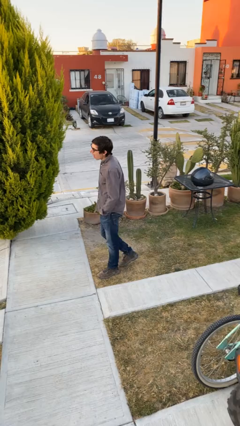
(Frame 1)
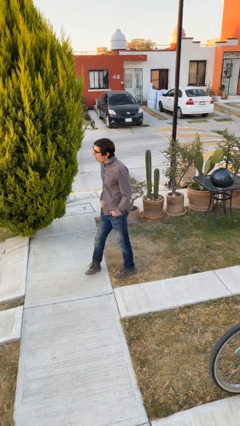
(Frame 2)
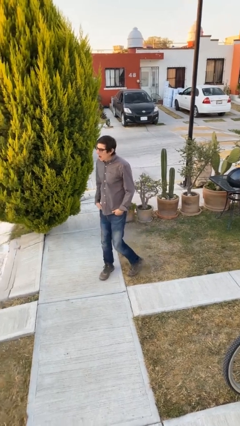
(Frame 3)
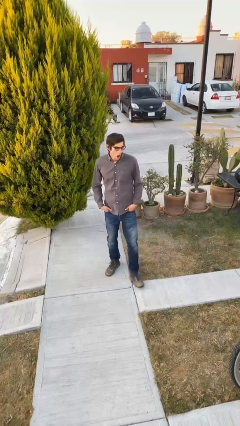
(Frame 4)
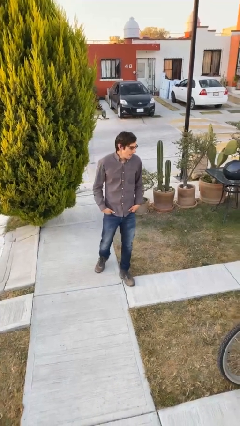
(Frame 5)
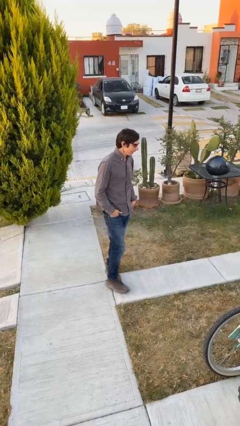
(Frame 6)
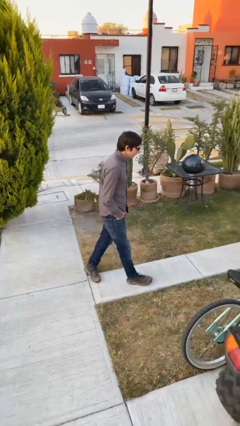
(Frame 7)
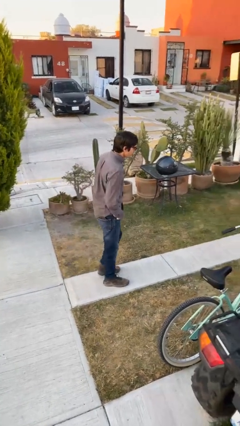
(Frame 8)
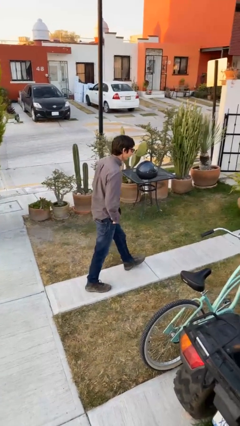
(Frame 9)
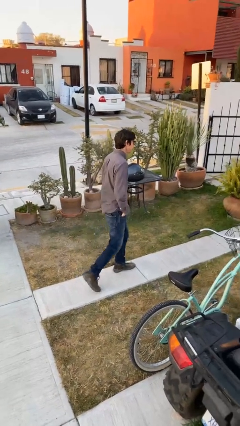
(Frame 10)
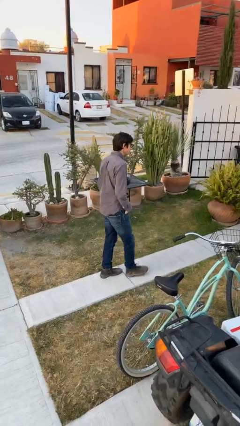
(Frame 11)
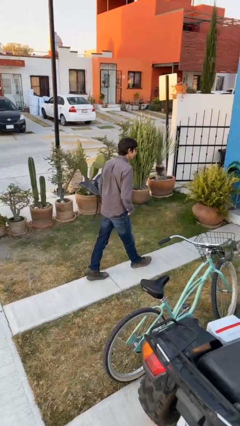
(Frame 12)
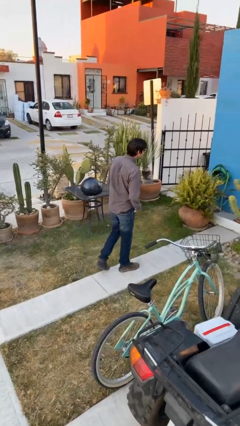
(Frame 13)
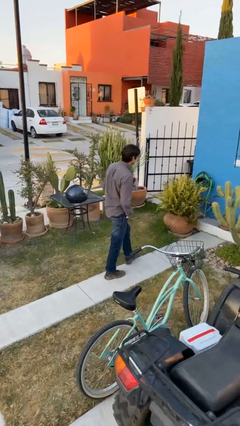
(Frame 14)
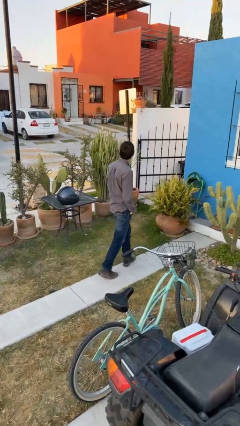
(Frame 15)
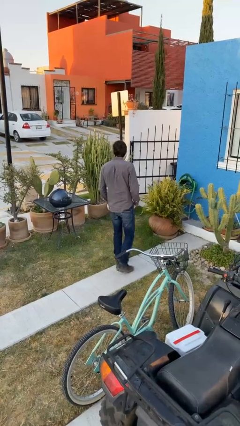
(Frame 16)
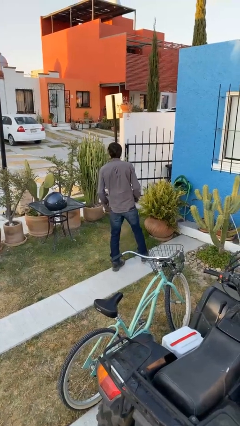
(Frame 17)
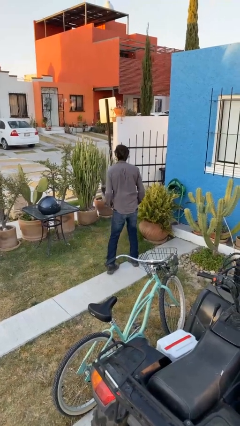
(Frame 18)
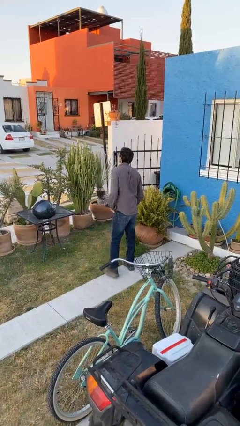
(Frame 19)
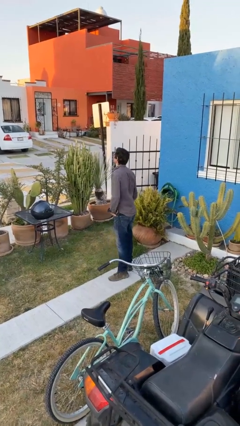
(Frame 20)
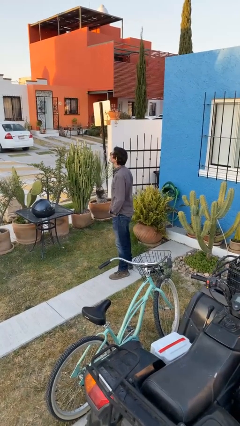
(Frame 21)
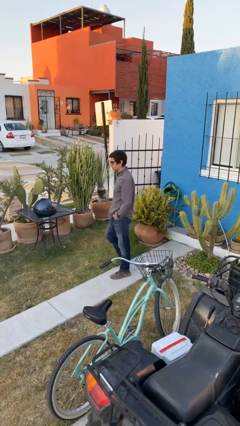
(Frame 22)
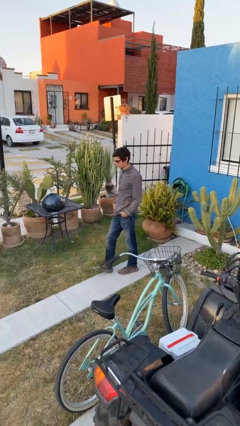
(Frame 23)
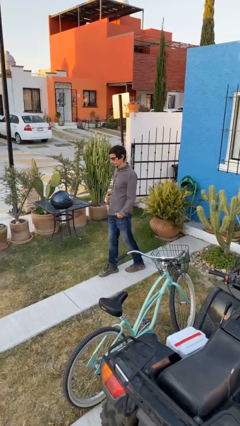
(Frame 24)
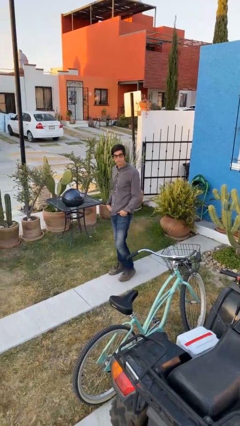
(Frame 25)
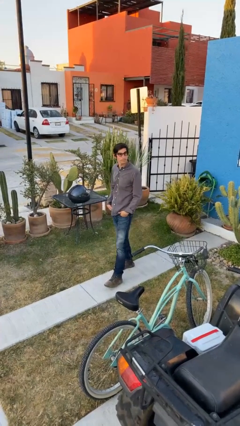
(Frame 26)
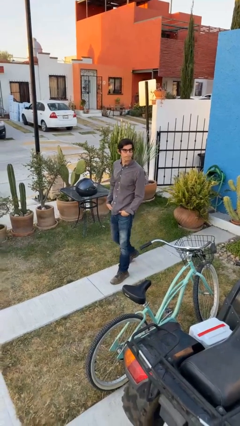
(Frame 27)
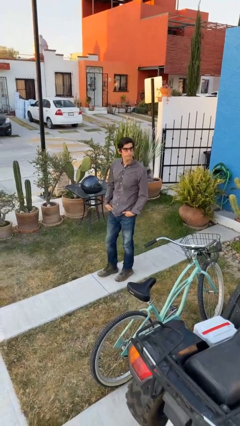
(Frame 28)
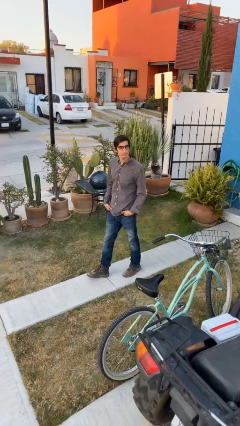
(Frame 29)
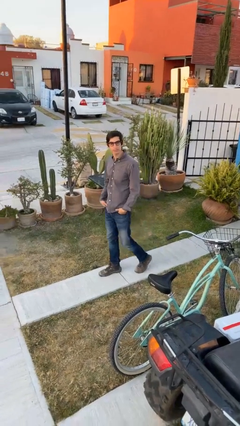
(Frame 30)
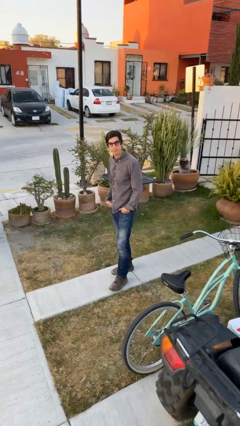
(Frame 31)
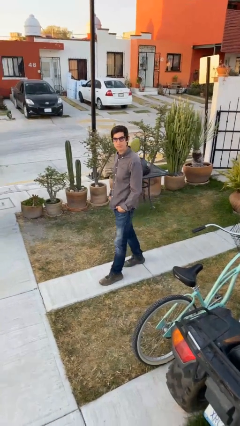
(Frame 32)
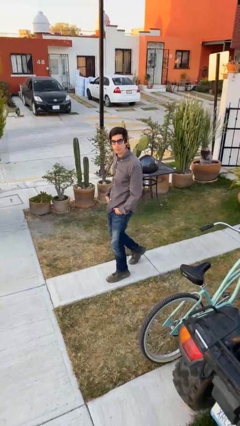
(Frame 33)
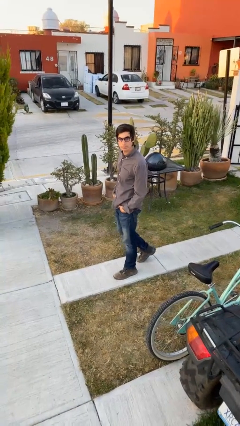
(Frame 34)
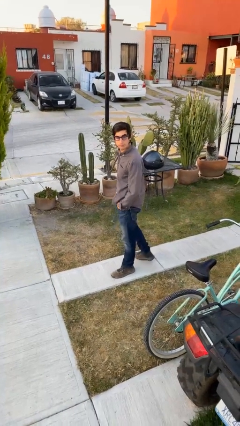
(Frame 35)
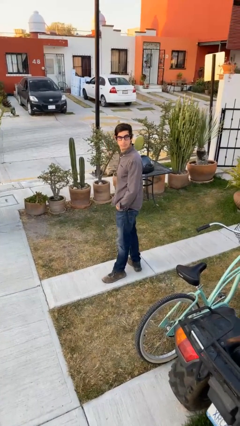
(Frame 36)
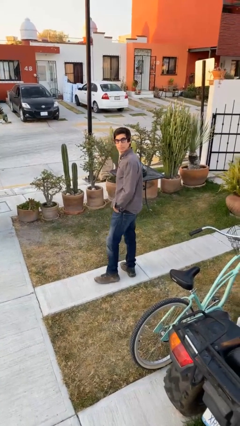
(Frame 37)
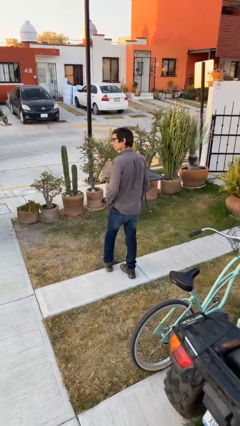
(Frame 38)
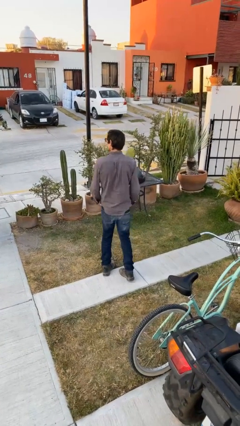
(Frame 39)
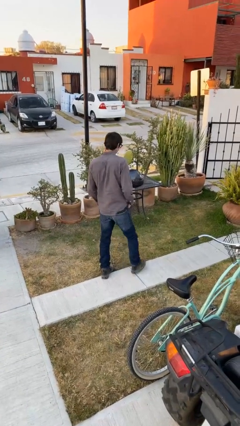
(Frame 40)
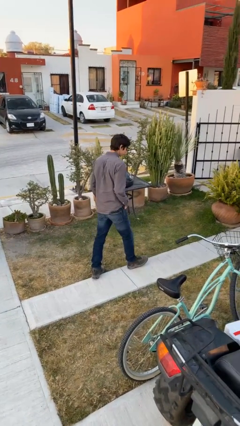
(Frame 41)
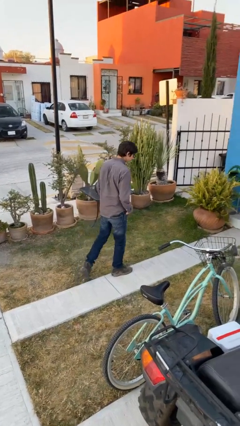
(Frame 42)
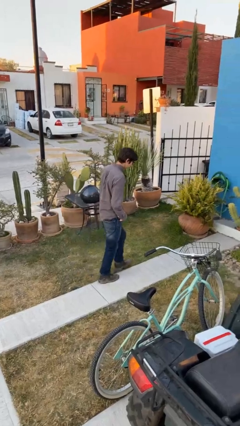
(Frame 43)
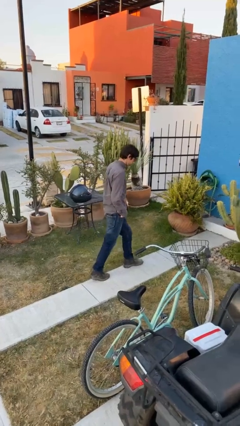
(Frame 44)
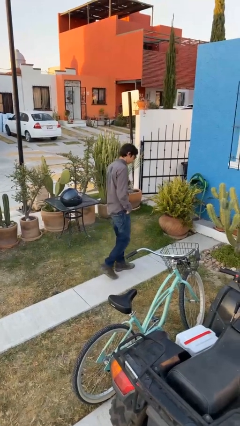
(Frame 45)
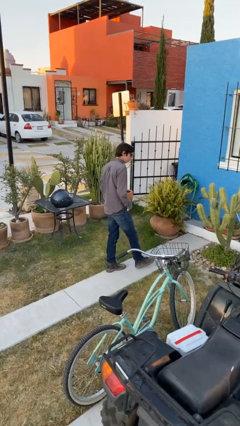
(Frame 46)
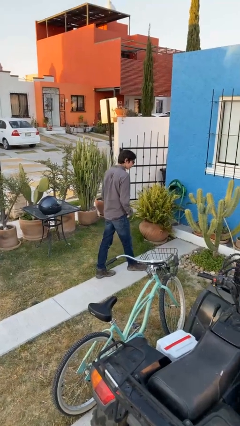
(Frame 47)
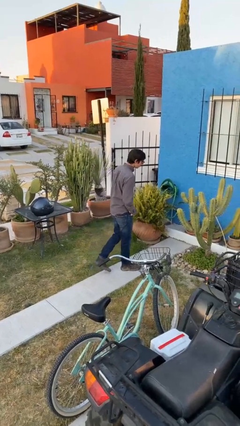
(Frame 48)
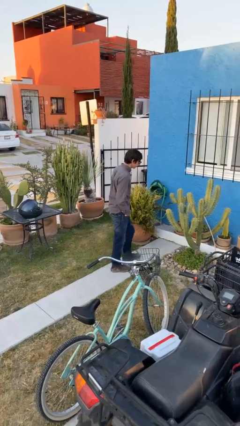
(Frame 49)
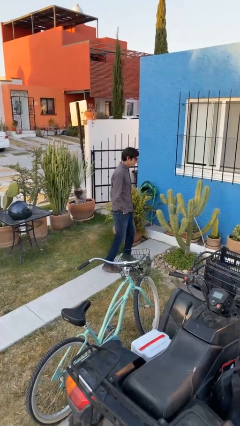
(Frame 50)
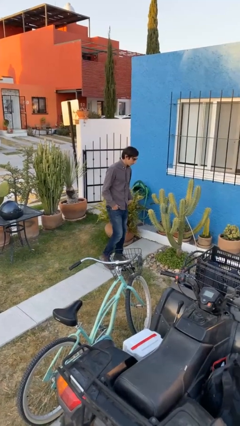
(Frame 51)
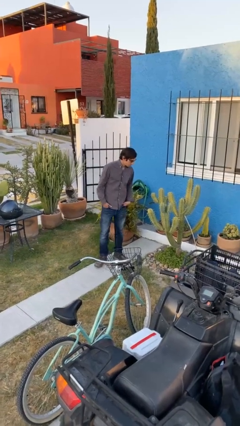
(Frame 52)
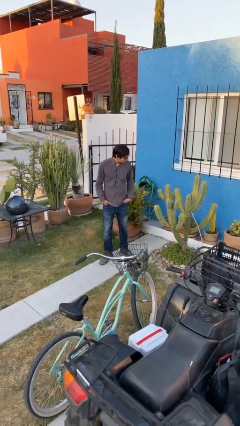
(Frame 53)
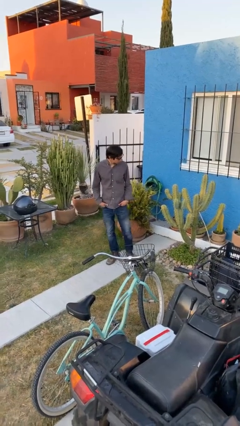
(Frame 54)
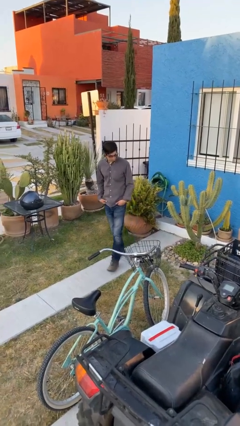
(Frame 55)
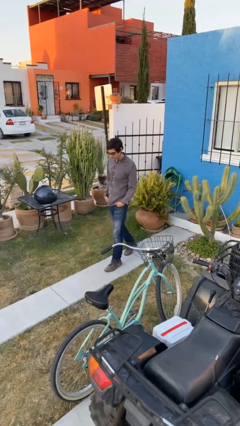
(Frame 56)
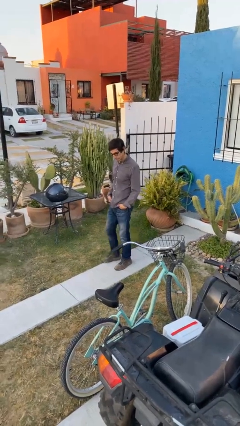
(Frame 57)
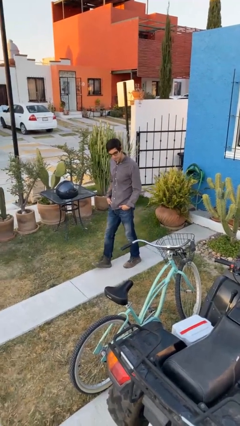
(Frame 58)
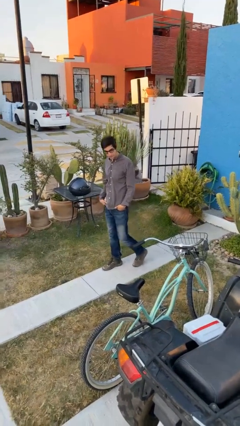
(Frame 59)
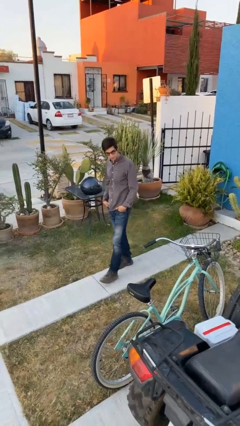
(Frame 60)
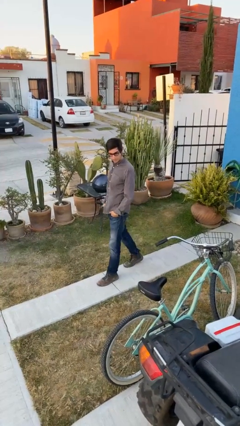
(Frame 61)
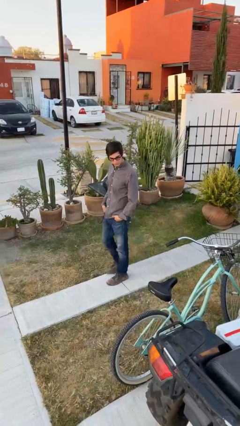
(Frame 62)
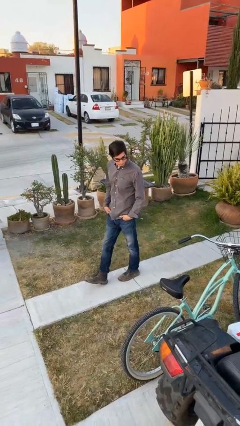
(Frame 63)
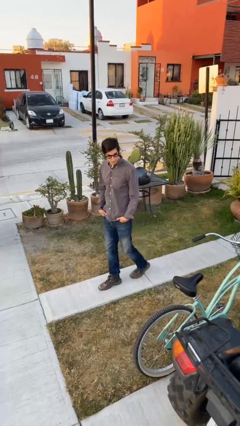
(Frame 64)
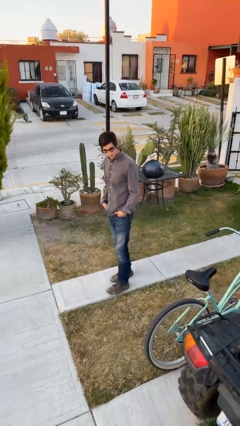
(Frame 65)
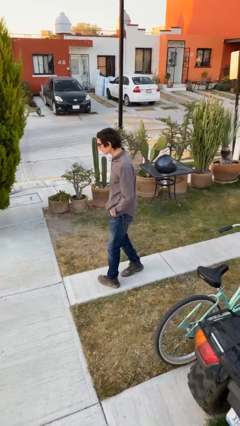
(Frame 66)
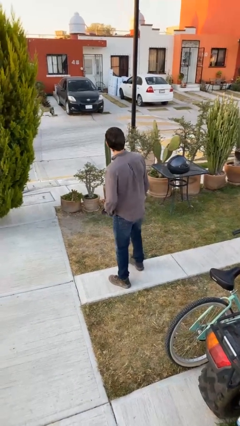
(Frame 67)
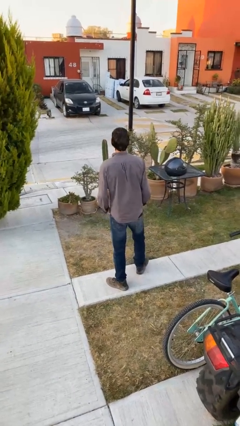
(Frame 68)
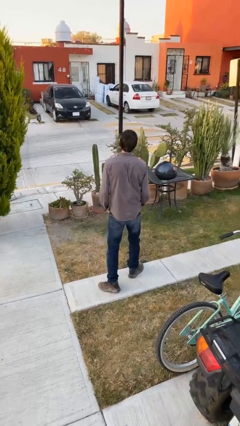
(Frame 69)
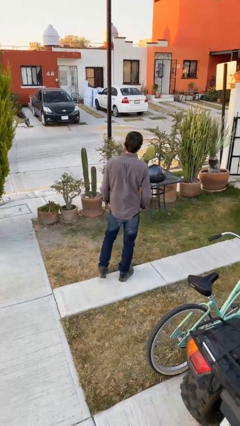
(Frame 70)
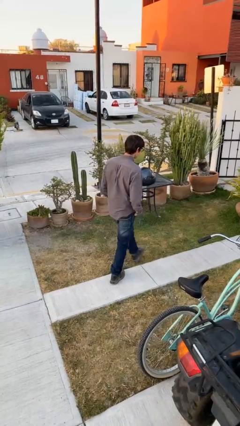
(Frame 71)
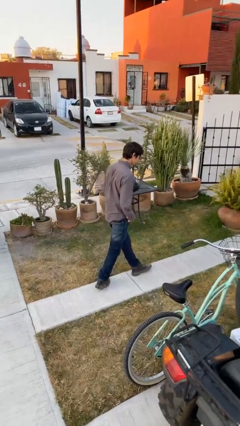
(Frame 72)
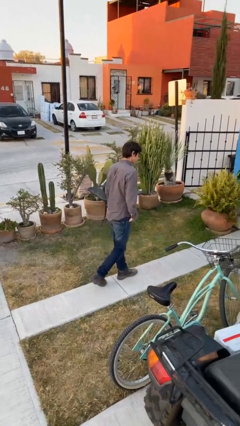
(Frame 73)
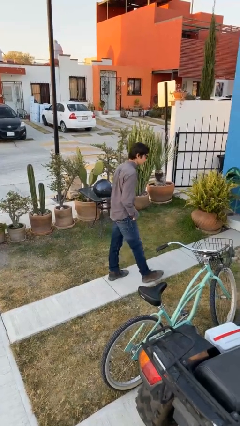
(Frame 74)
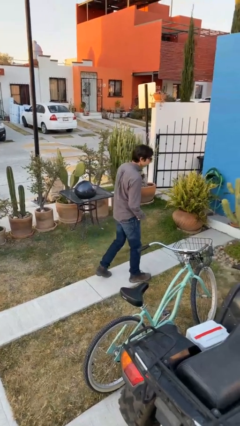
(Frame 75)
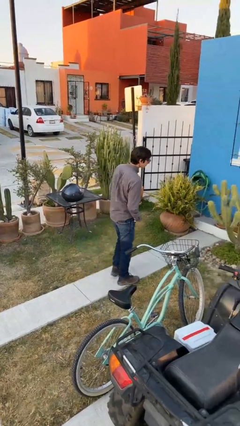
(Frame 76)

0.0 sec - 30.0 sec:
person walks

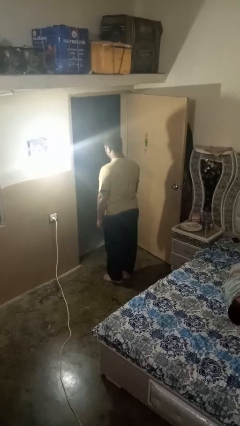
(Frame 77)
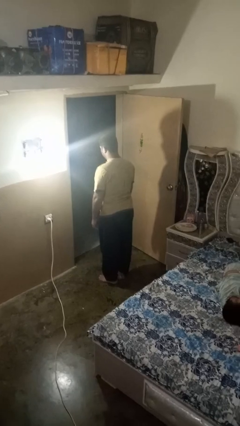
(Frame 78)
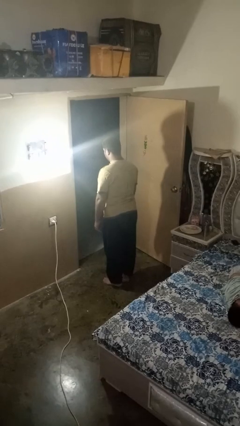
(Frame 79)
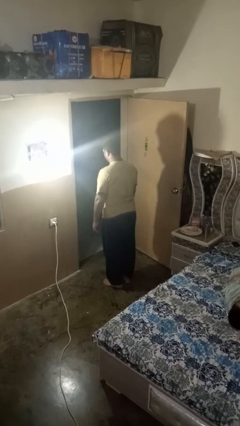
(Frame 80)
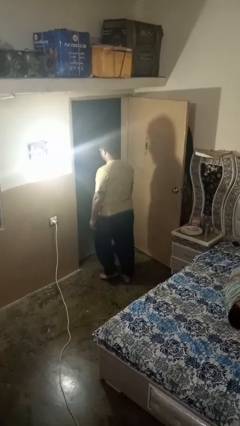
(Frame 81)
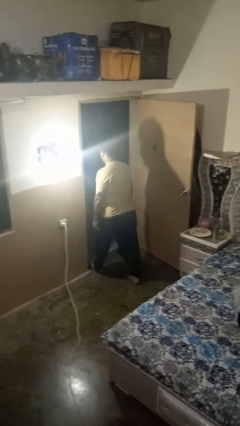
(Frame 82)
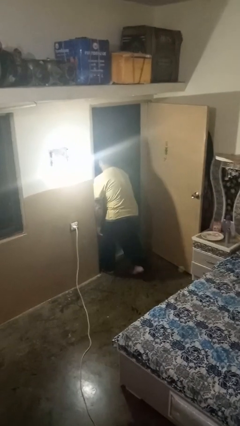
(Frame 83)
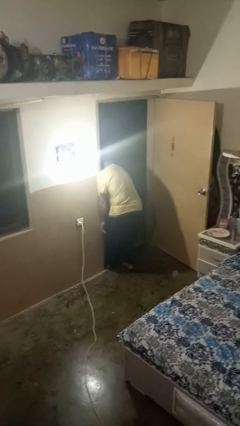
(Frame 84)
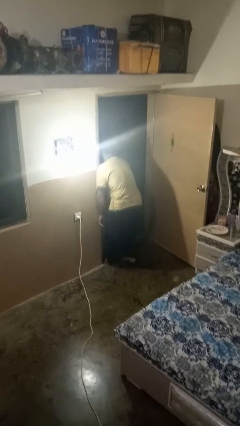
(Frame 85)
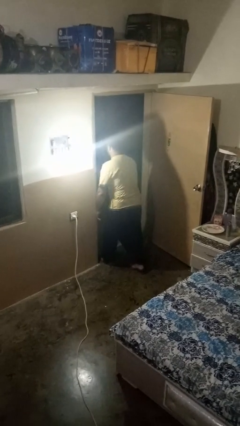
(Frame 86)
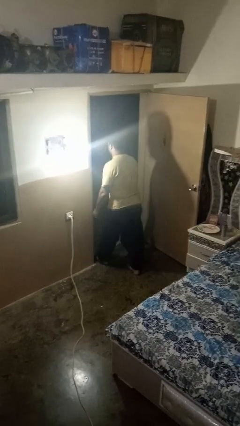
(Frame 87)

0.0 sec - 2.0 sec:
person bumps into wall

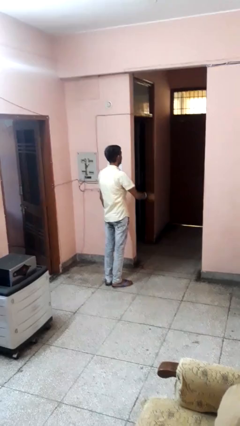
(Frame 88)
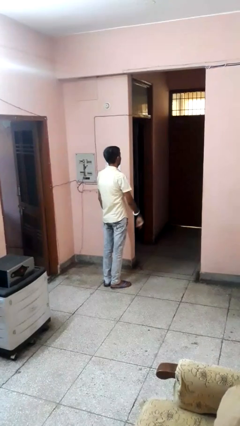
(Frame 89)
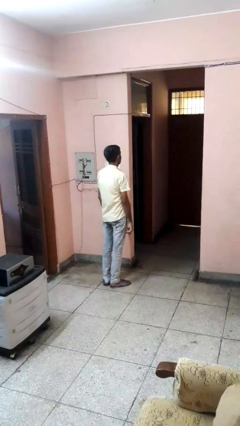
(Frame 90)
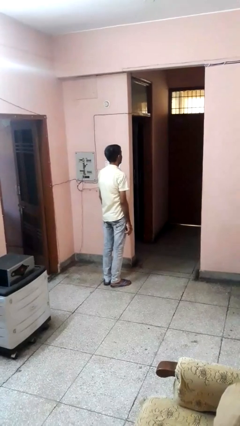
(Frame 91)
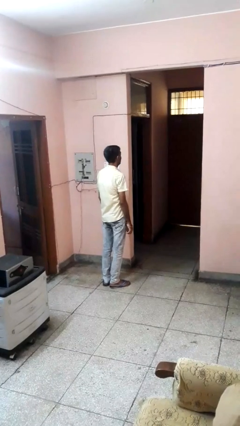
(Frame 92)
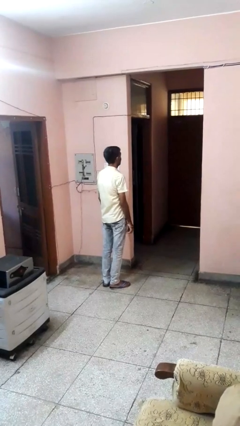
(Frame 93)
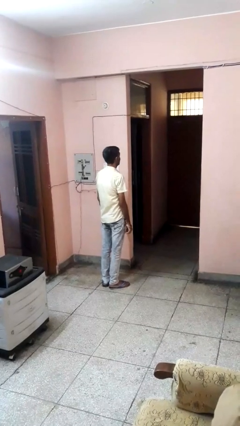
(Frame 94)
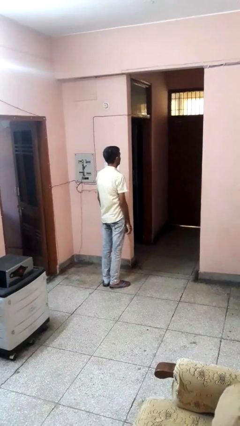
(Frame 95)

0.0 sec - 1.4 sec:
person gestures lower hand
